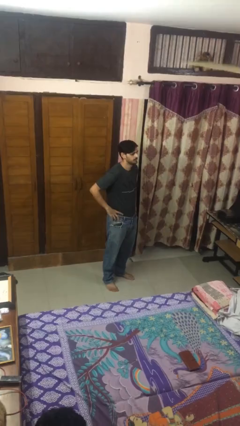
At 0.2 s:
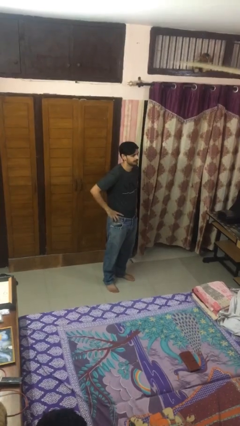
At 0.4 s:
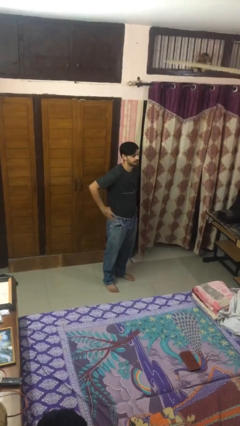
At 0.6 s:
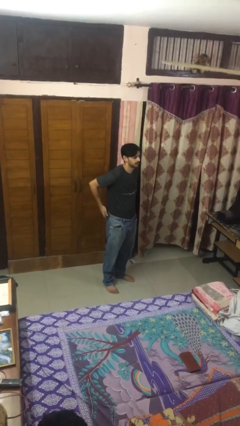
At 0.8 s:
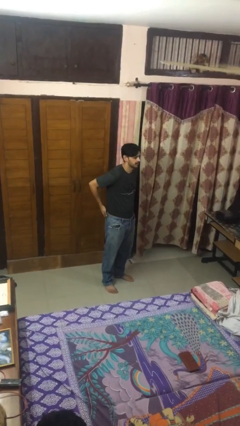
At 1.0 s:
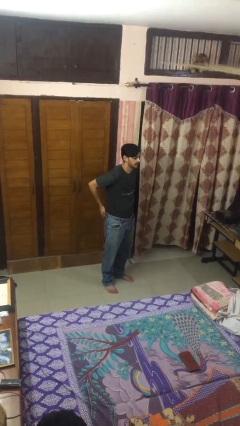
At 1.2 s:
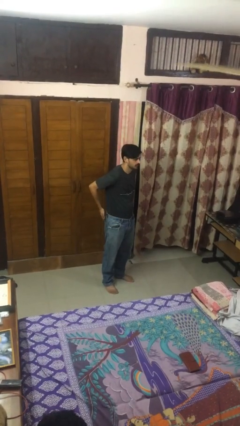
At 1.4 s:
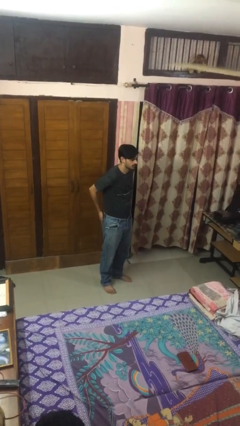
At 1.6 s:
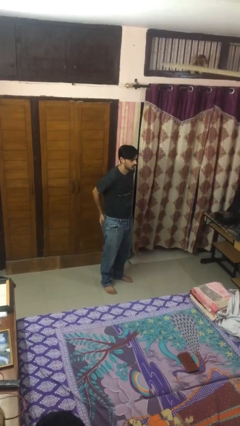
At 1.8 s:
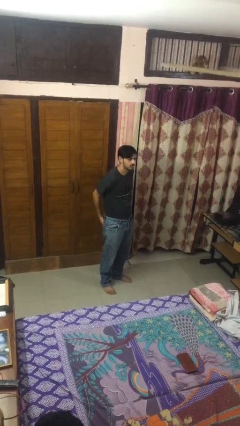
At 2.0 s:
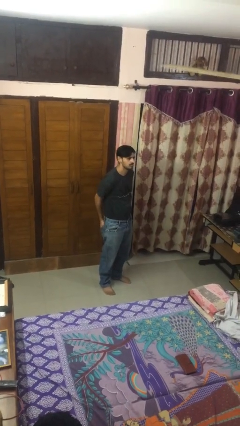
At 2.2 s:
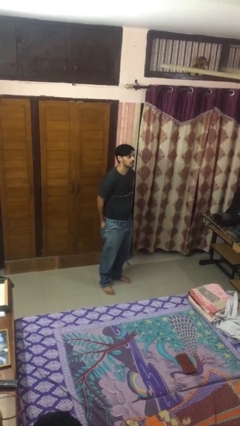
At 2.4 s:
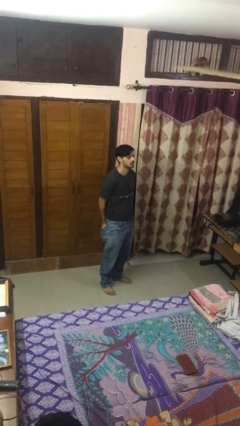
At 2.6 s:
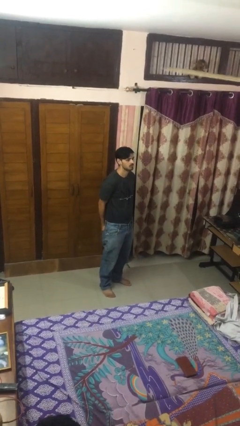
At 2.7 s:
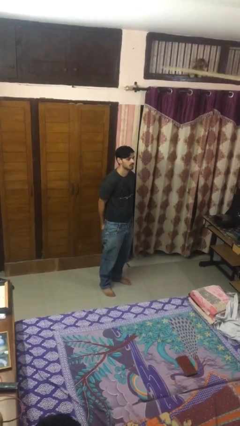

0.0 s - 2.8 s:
person puts hands in back pockets

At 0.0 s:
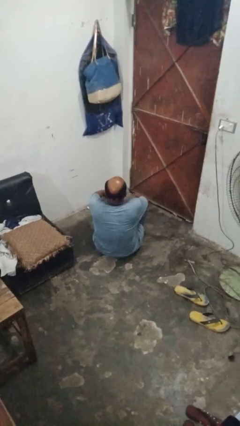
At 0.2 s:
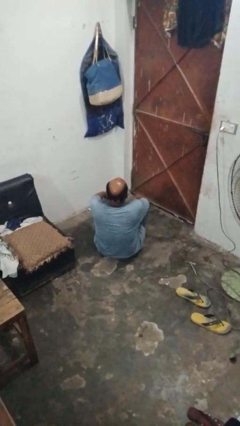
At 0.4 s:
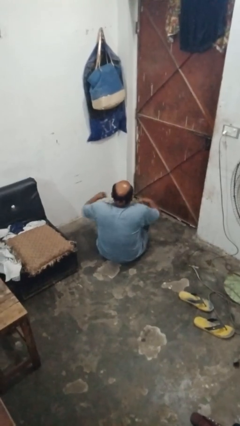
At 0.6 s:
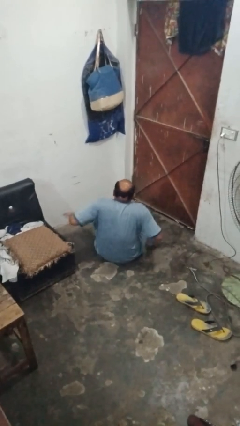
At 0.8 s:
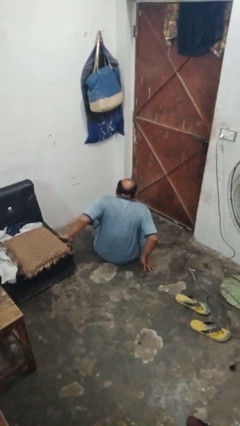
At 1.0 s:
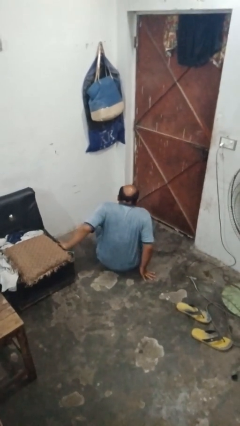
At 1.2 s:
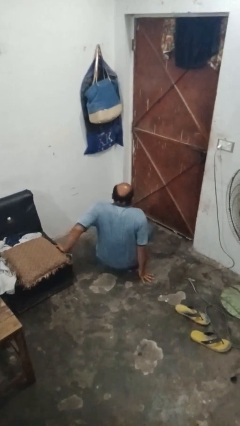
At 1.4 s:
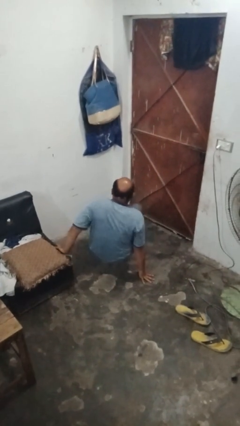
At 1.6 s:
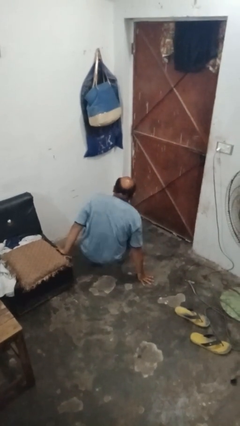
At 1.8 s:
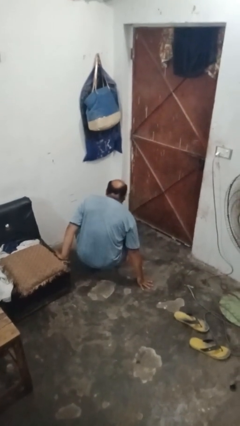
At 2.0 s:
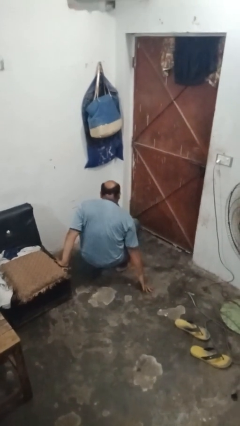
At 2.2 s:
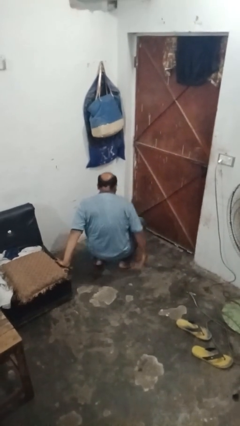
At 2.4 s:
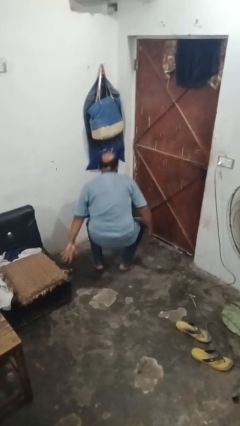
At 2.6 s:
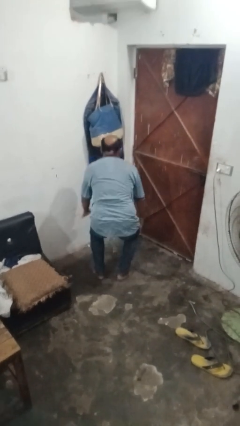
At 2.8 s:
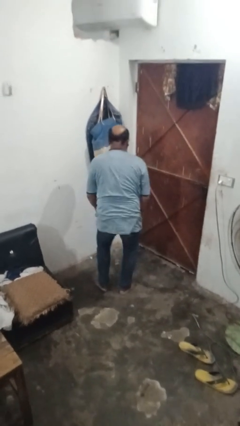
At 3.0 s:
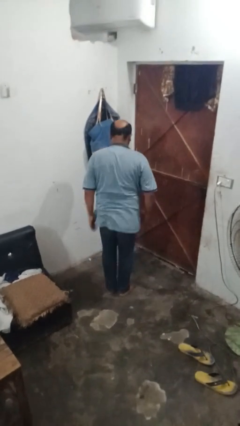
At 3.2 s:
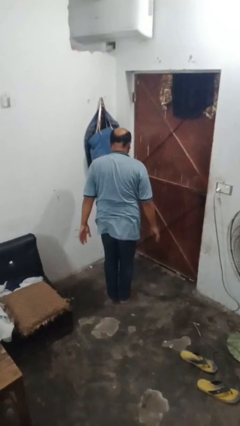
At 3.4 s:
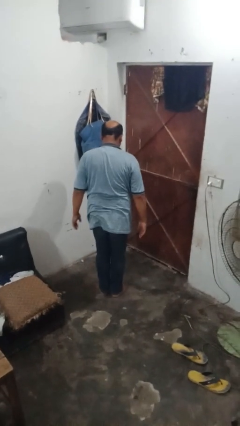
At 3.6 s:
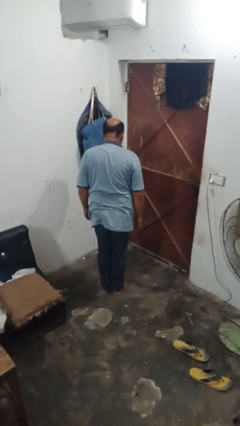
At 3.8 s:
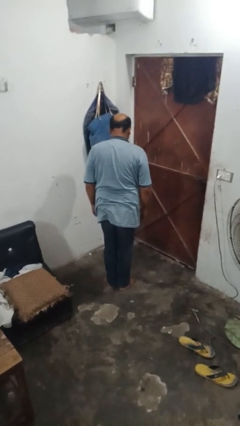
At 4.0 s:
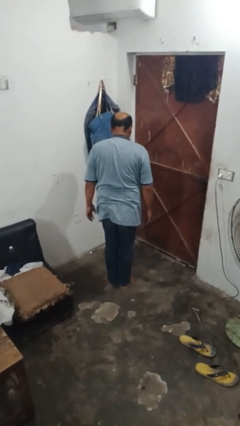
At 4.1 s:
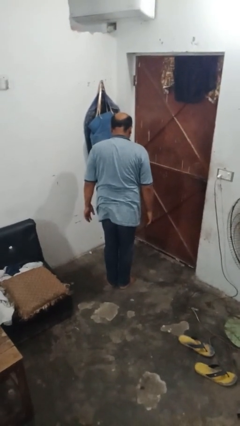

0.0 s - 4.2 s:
person stands up from floor

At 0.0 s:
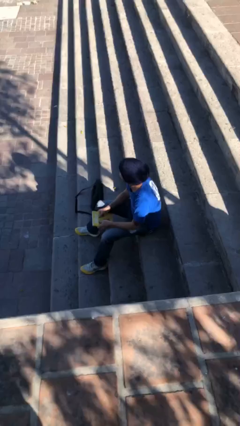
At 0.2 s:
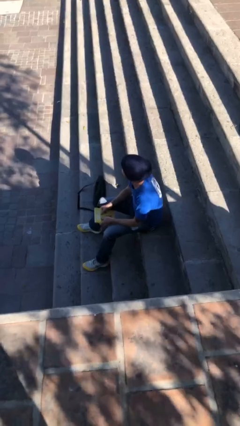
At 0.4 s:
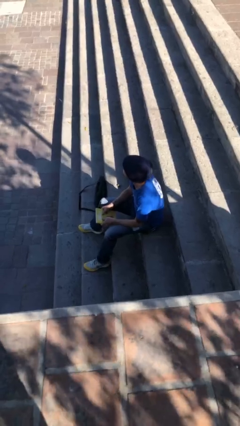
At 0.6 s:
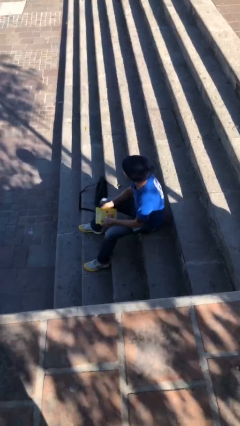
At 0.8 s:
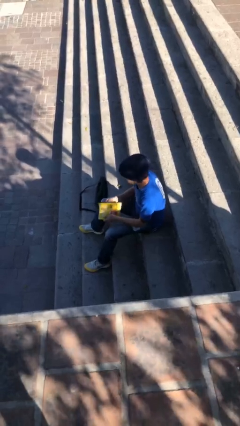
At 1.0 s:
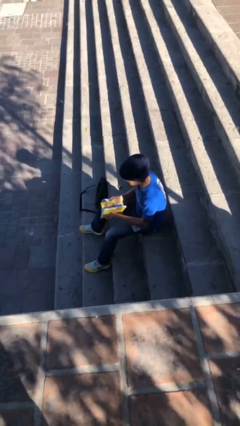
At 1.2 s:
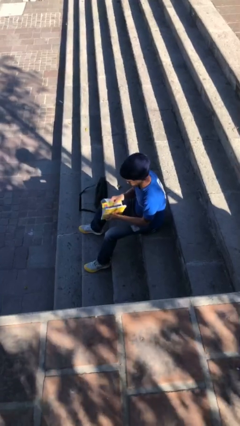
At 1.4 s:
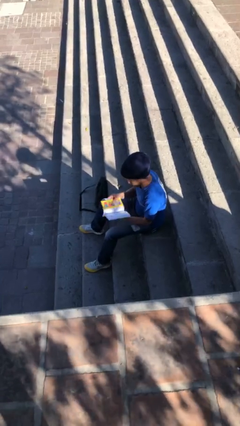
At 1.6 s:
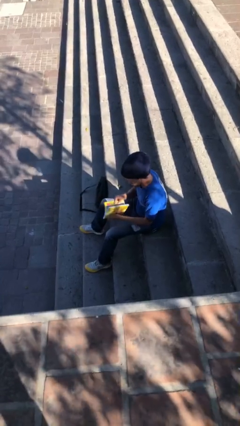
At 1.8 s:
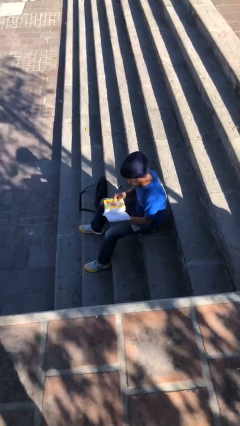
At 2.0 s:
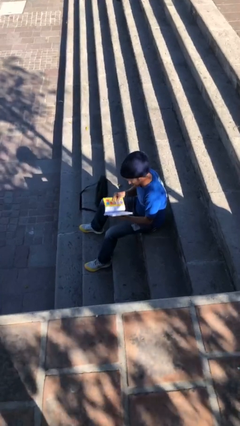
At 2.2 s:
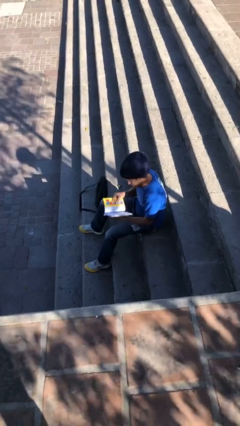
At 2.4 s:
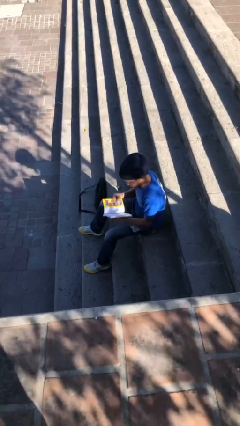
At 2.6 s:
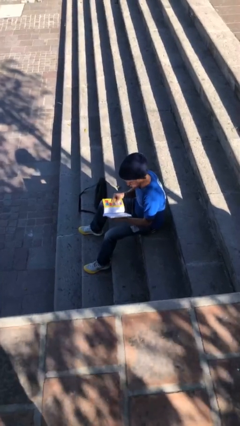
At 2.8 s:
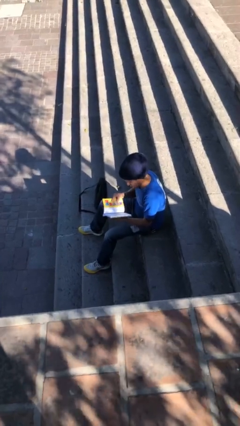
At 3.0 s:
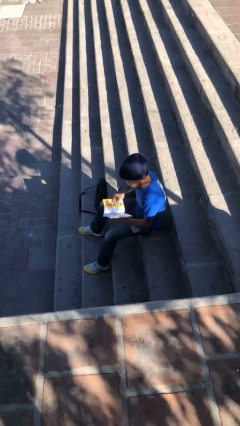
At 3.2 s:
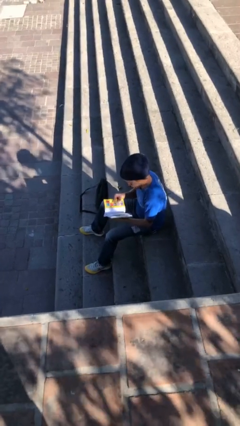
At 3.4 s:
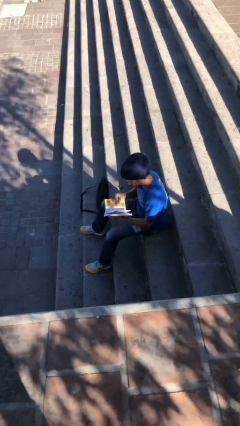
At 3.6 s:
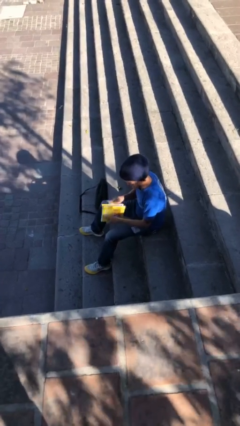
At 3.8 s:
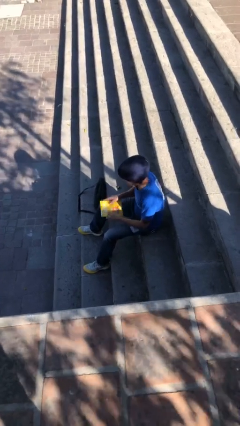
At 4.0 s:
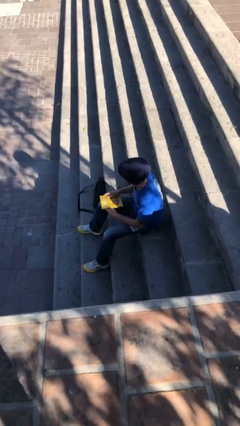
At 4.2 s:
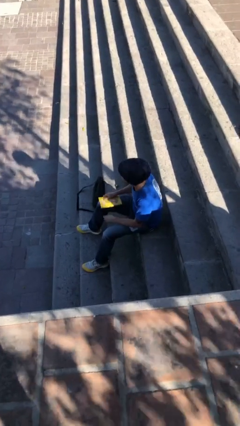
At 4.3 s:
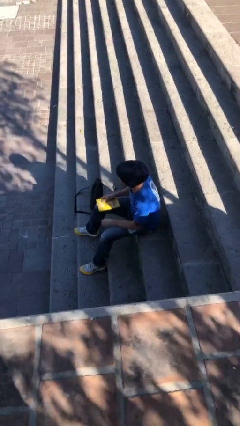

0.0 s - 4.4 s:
person reads document

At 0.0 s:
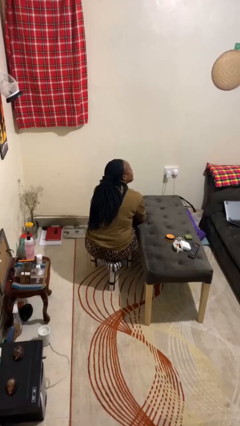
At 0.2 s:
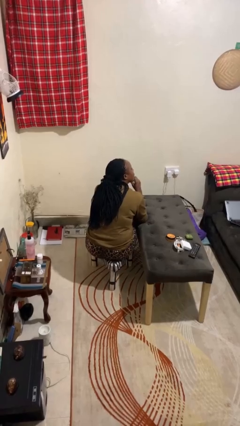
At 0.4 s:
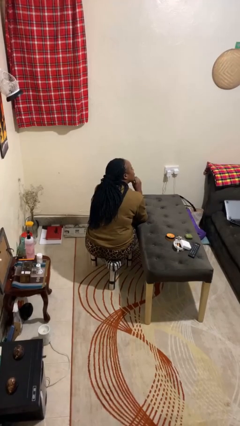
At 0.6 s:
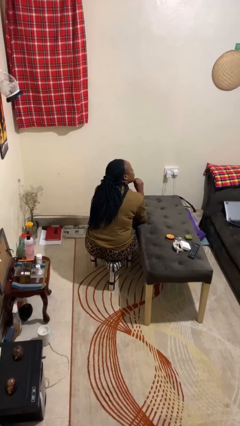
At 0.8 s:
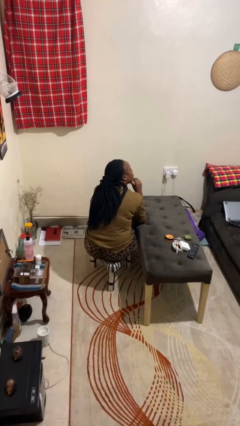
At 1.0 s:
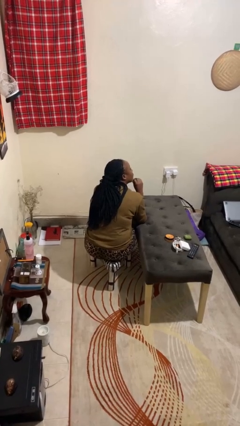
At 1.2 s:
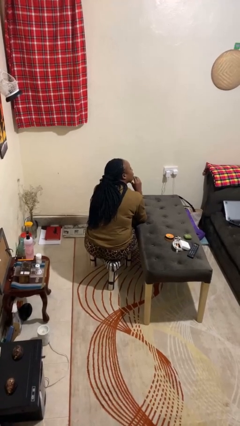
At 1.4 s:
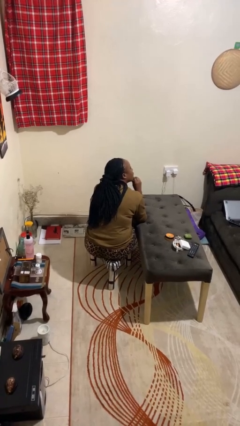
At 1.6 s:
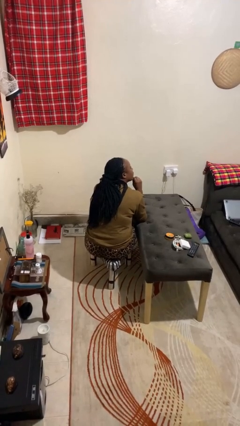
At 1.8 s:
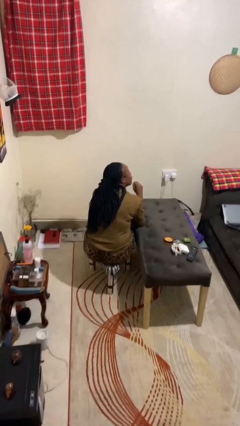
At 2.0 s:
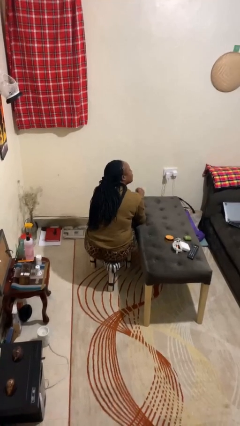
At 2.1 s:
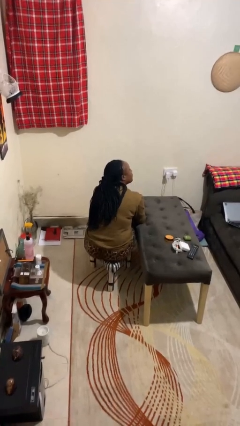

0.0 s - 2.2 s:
person strokes chin

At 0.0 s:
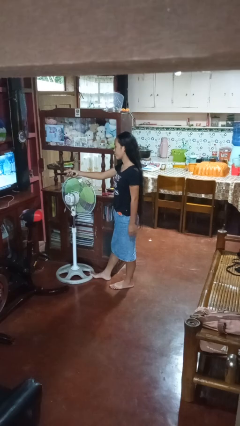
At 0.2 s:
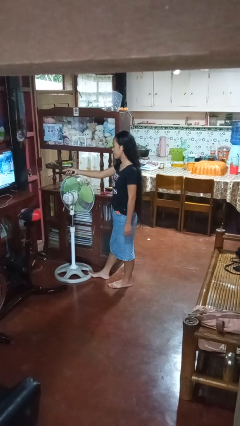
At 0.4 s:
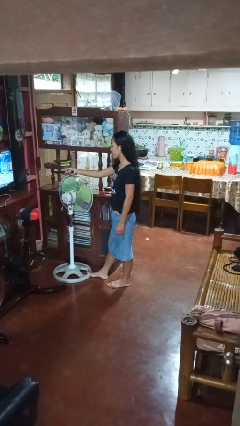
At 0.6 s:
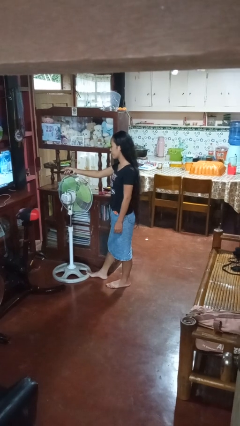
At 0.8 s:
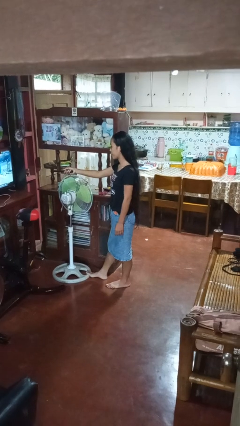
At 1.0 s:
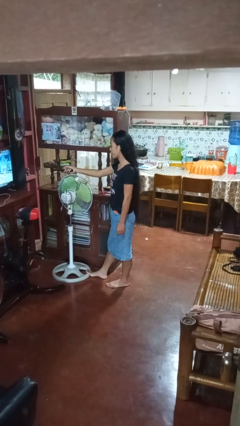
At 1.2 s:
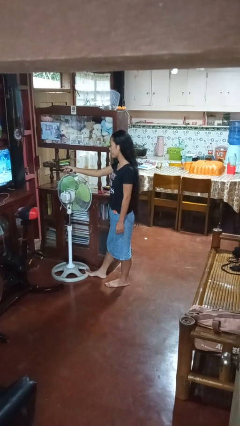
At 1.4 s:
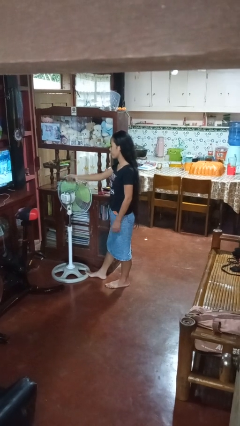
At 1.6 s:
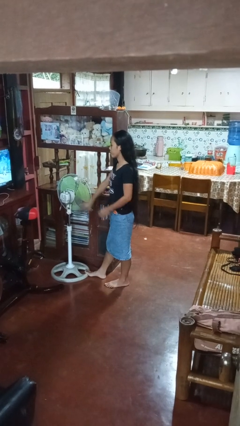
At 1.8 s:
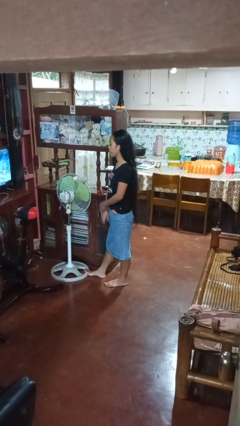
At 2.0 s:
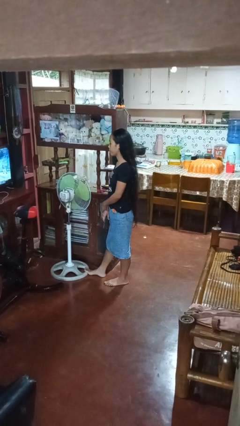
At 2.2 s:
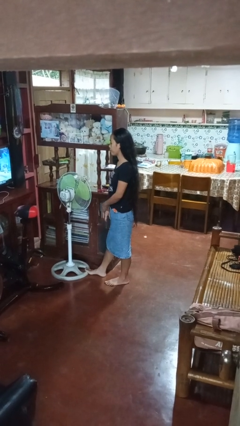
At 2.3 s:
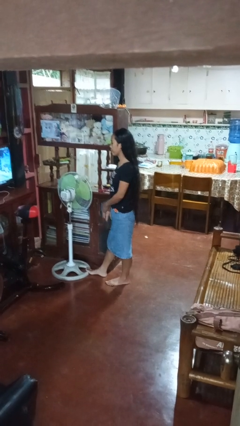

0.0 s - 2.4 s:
person uses television remote

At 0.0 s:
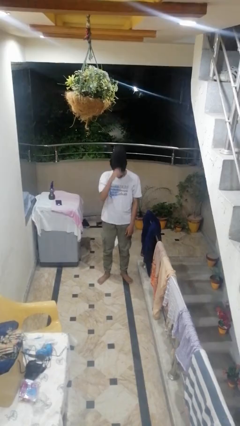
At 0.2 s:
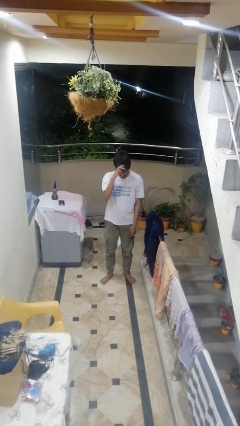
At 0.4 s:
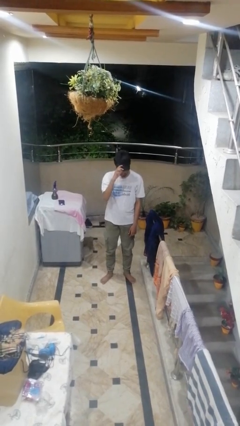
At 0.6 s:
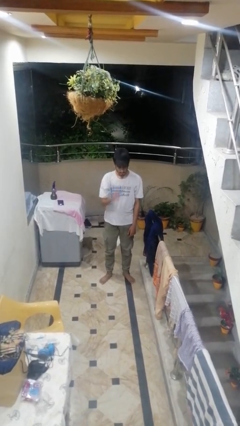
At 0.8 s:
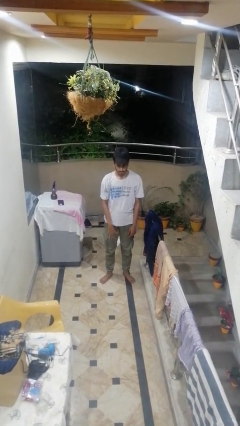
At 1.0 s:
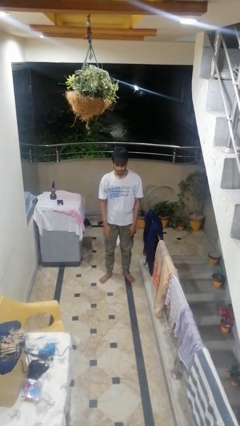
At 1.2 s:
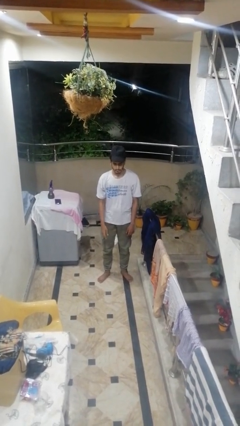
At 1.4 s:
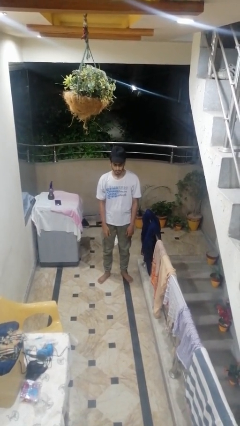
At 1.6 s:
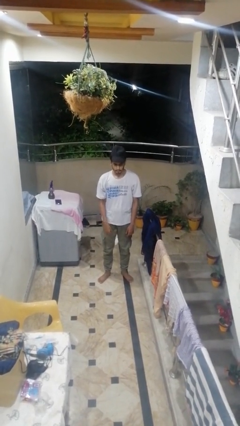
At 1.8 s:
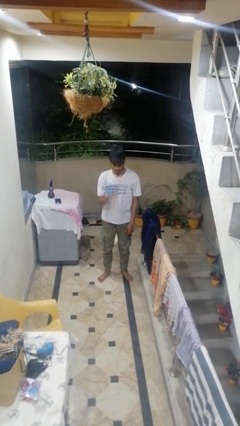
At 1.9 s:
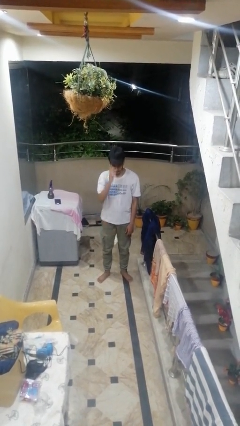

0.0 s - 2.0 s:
person puts on hat
